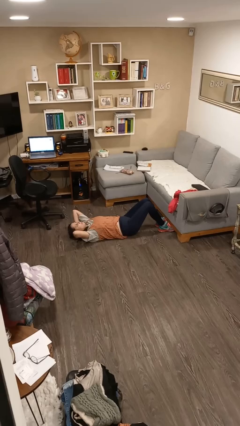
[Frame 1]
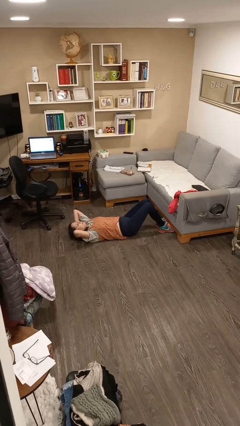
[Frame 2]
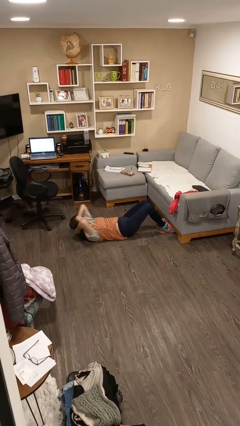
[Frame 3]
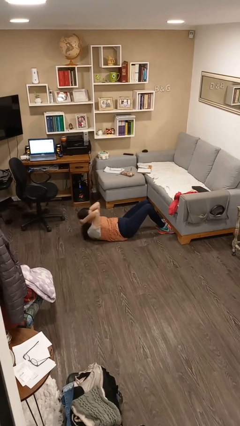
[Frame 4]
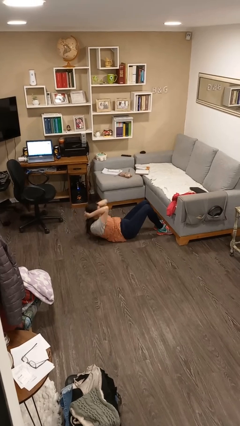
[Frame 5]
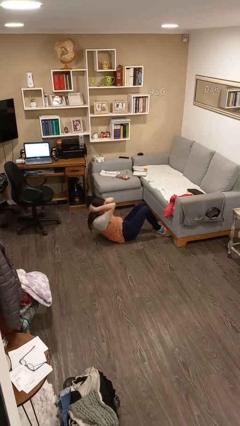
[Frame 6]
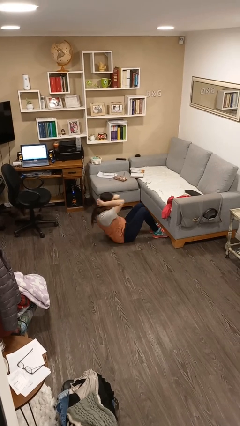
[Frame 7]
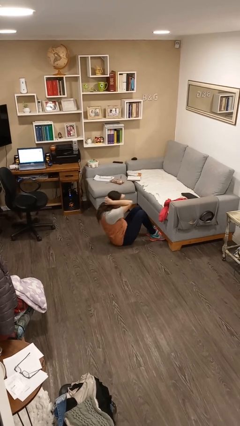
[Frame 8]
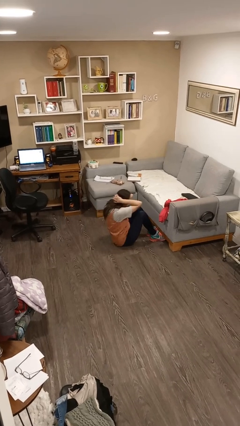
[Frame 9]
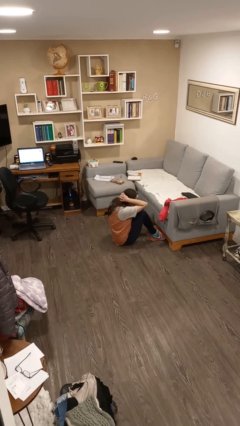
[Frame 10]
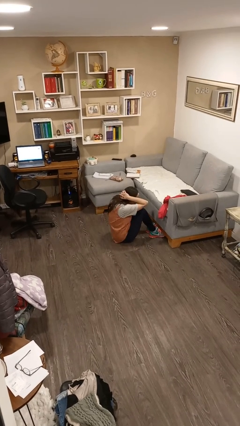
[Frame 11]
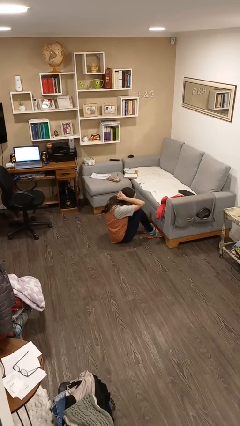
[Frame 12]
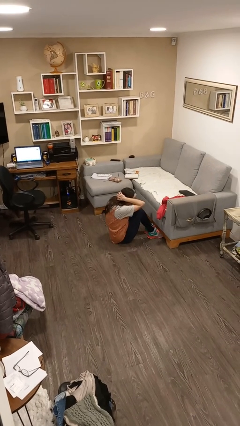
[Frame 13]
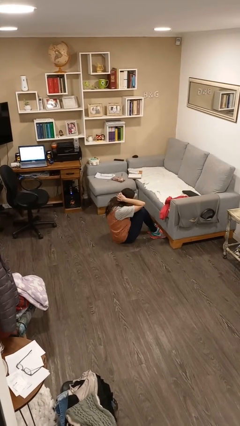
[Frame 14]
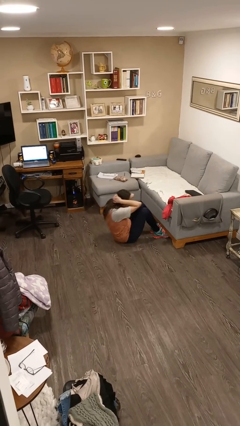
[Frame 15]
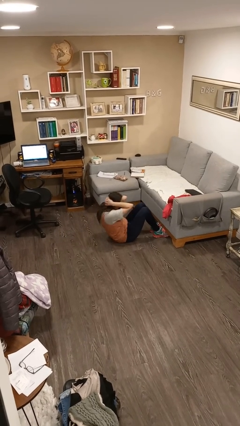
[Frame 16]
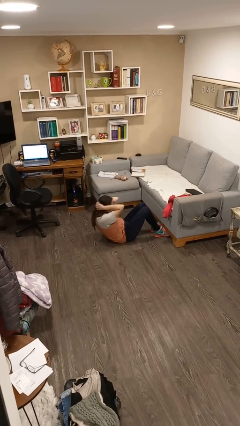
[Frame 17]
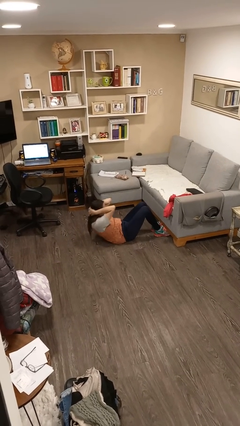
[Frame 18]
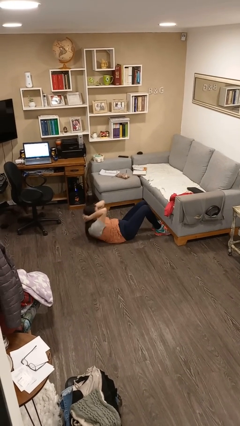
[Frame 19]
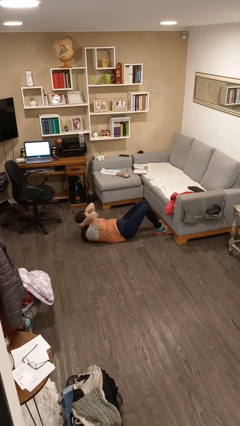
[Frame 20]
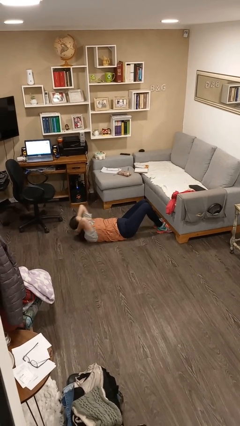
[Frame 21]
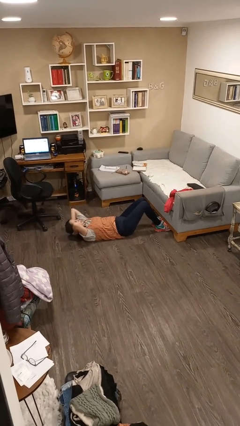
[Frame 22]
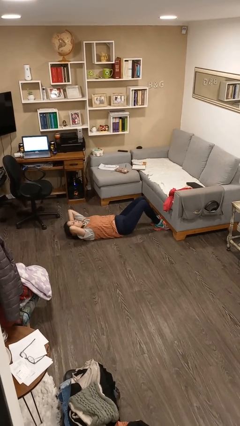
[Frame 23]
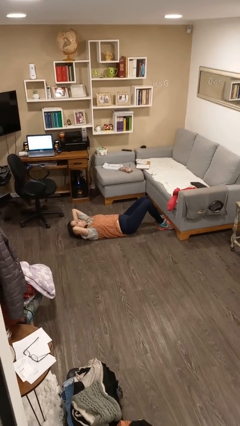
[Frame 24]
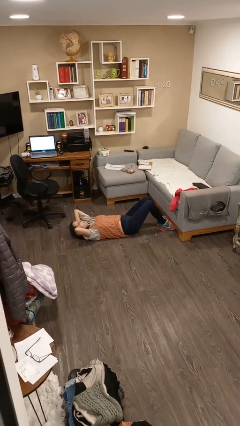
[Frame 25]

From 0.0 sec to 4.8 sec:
person exercises with situp

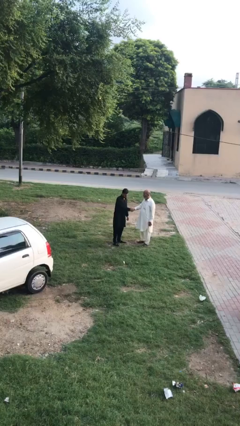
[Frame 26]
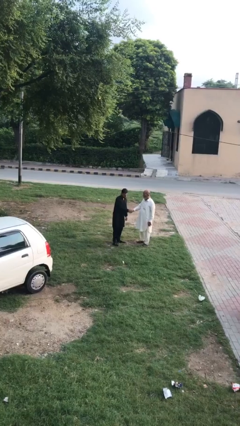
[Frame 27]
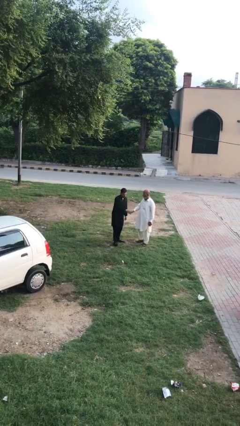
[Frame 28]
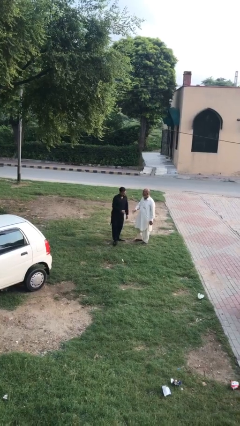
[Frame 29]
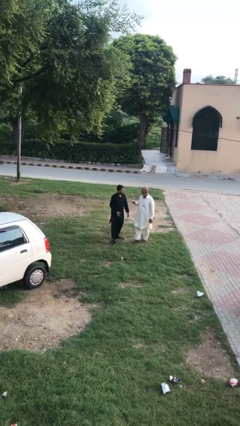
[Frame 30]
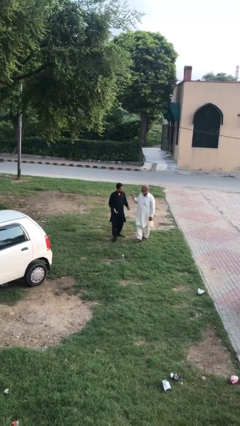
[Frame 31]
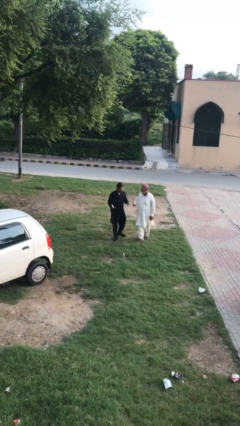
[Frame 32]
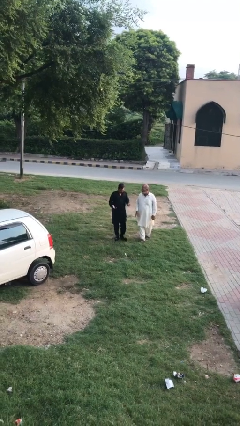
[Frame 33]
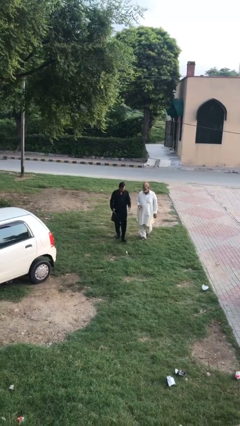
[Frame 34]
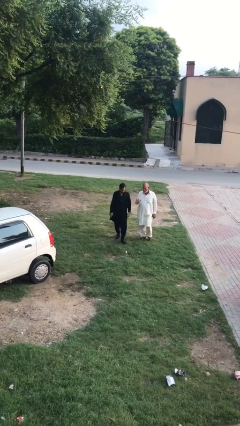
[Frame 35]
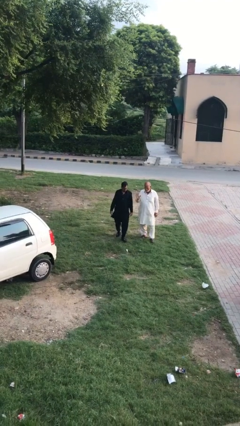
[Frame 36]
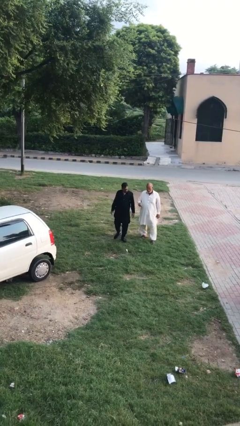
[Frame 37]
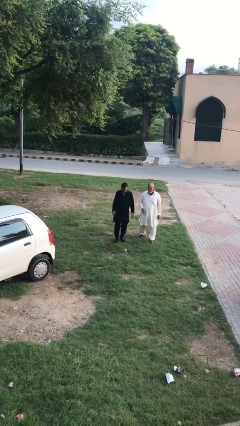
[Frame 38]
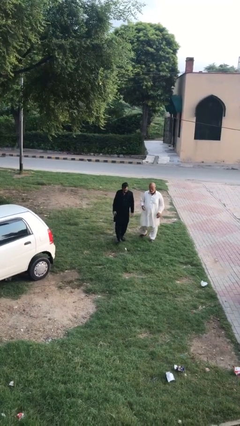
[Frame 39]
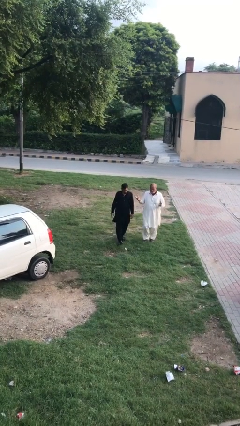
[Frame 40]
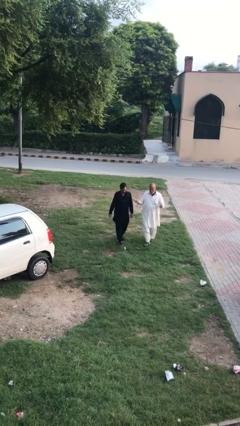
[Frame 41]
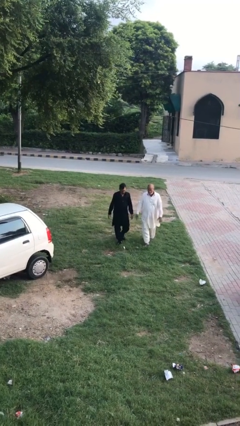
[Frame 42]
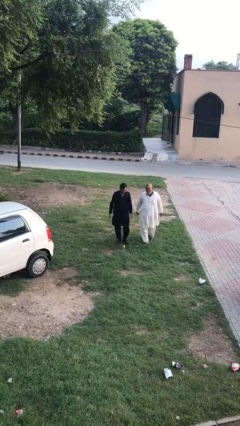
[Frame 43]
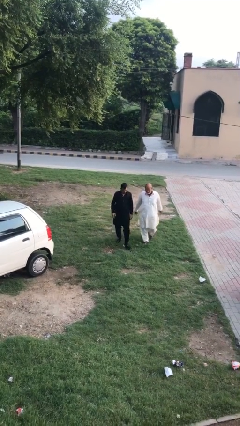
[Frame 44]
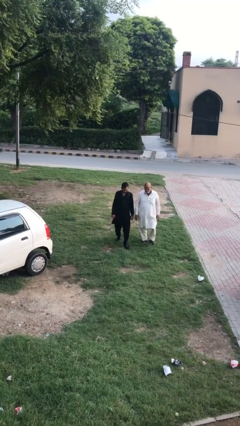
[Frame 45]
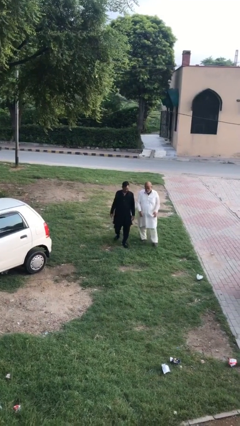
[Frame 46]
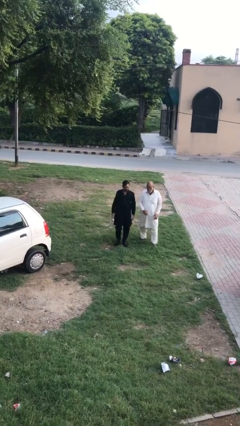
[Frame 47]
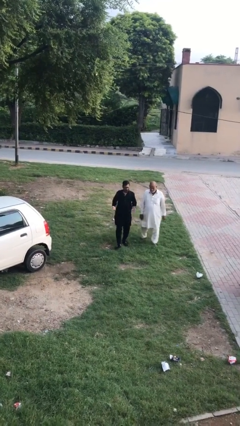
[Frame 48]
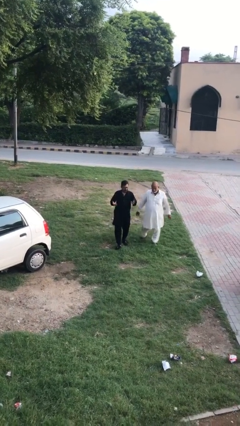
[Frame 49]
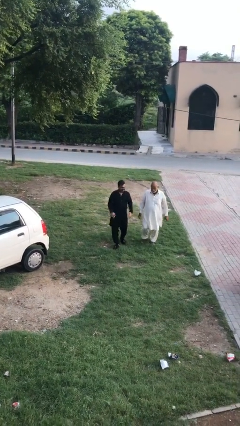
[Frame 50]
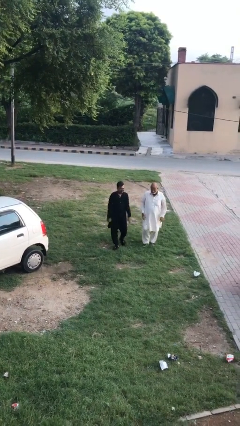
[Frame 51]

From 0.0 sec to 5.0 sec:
person talks to person

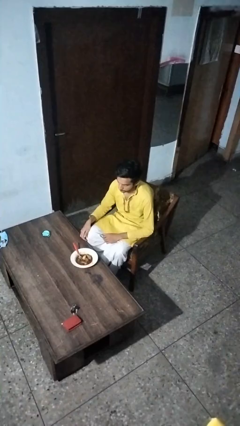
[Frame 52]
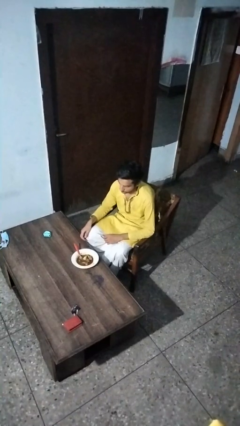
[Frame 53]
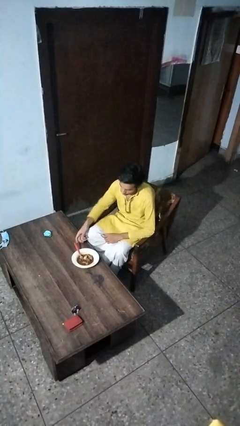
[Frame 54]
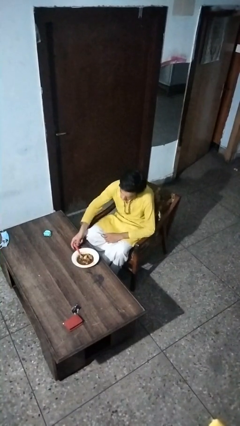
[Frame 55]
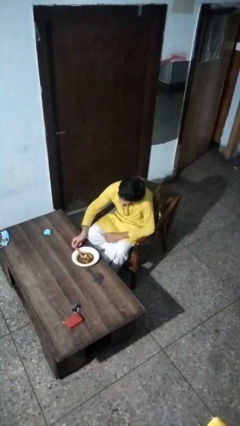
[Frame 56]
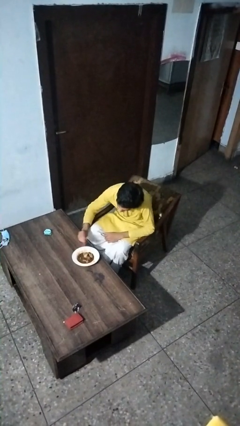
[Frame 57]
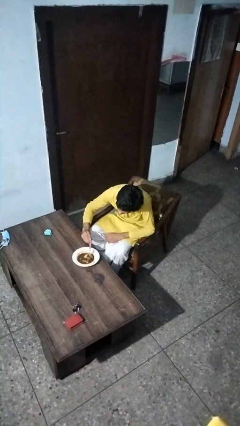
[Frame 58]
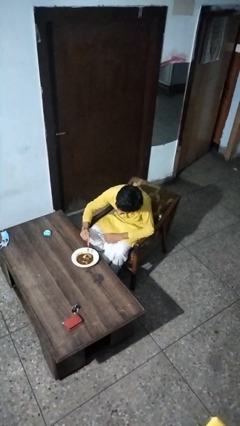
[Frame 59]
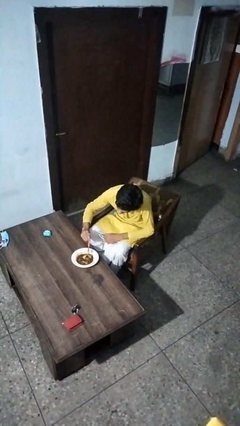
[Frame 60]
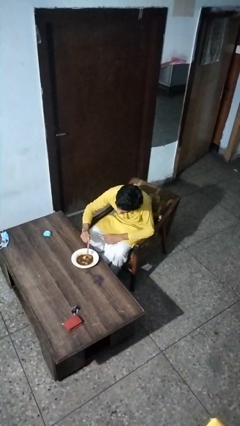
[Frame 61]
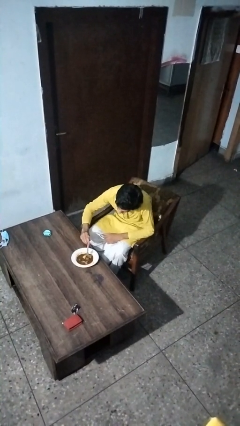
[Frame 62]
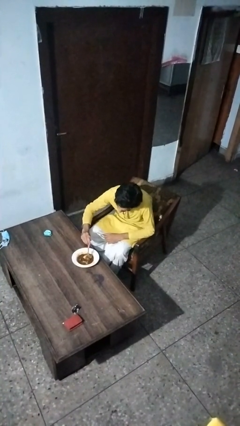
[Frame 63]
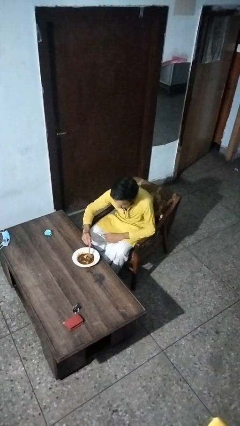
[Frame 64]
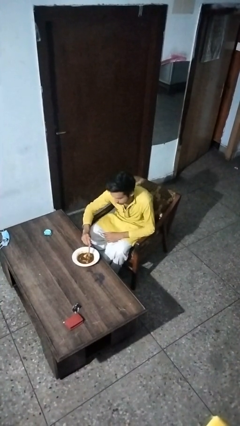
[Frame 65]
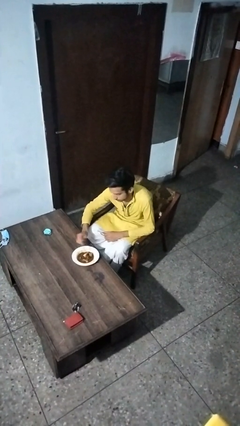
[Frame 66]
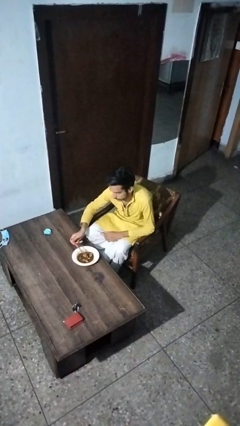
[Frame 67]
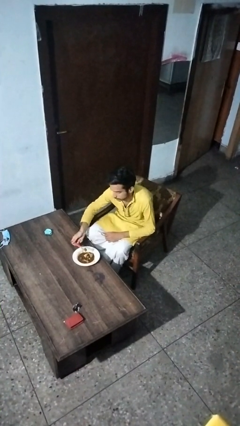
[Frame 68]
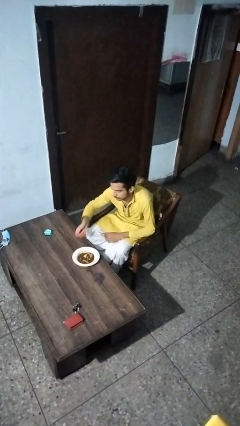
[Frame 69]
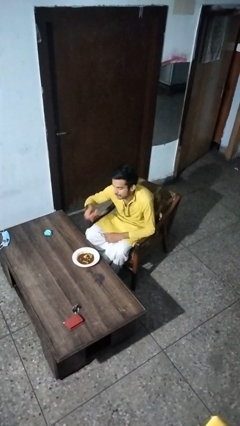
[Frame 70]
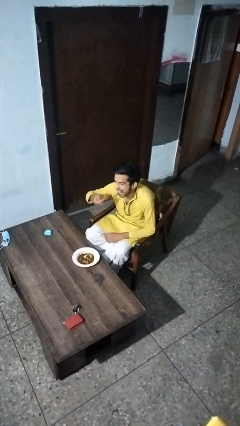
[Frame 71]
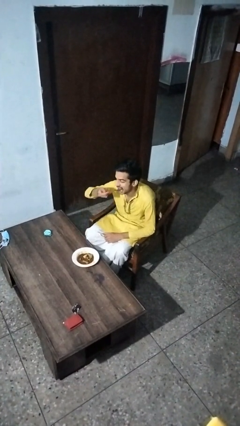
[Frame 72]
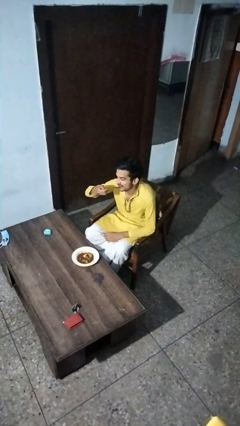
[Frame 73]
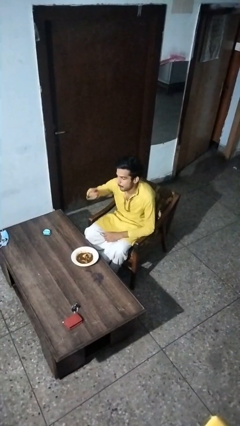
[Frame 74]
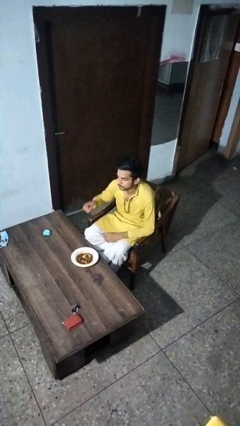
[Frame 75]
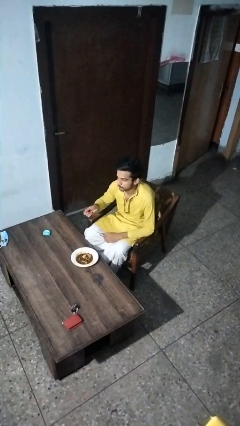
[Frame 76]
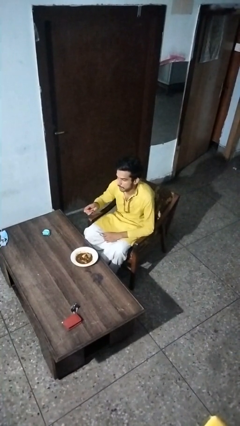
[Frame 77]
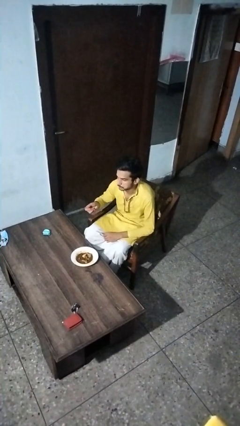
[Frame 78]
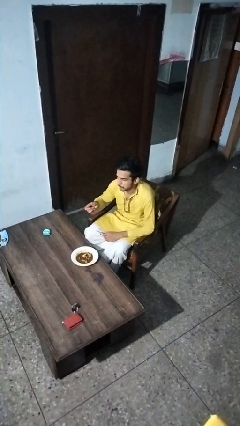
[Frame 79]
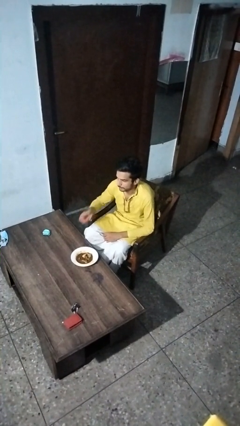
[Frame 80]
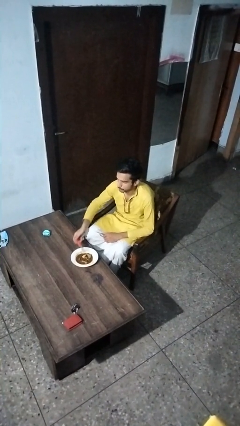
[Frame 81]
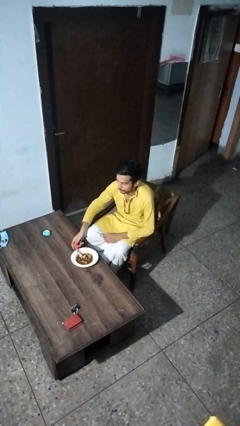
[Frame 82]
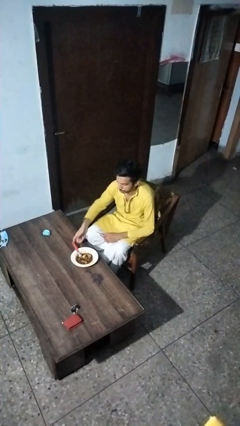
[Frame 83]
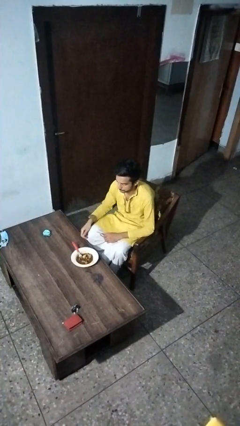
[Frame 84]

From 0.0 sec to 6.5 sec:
person eats with utensil

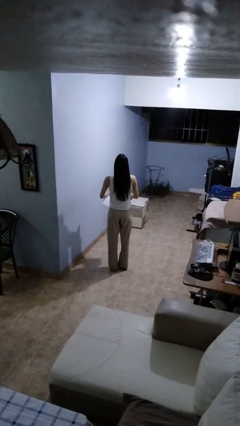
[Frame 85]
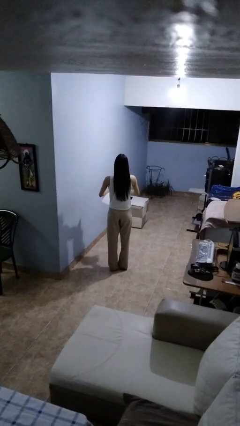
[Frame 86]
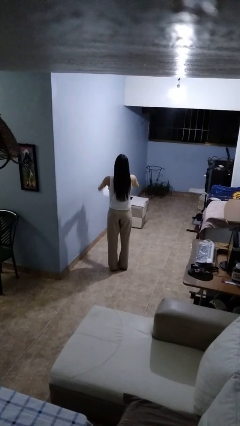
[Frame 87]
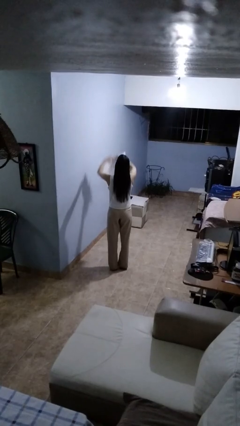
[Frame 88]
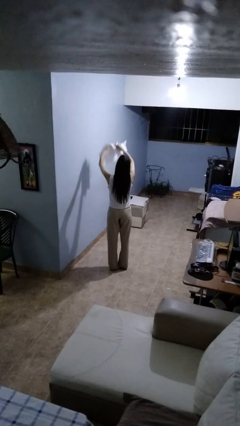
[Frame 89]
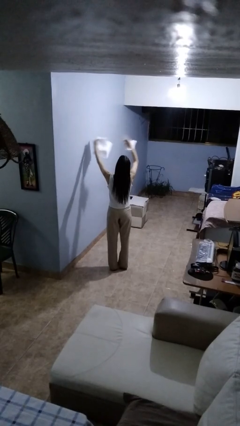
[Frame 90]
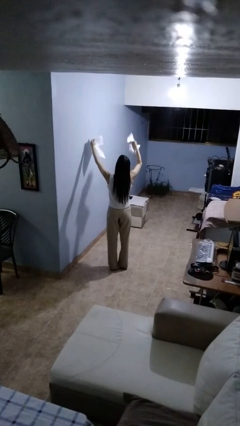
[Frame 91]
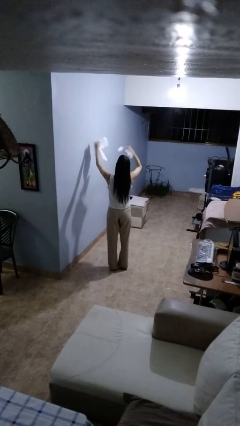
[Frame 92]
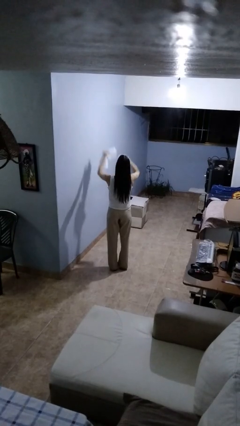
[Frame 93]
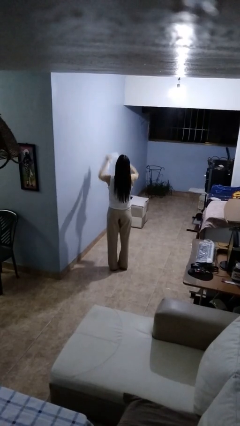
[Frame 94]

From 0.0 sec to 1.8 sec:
person tears paper
